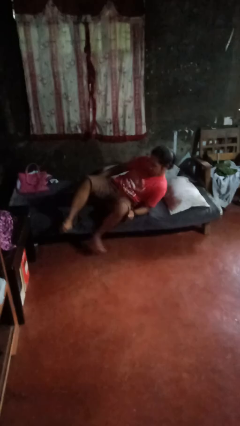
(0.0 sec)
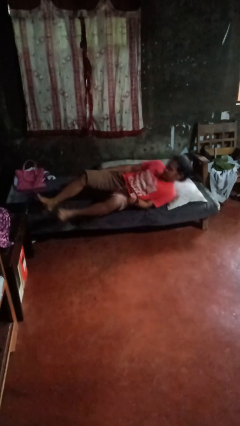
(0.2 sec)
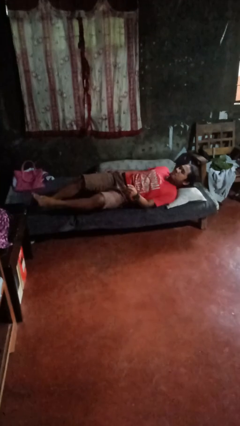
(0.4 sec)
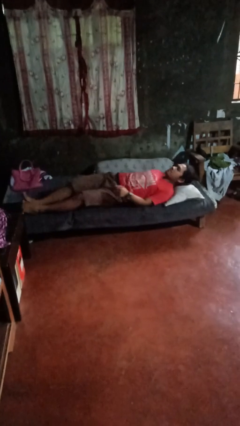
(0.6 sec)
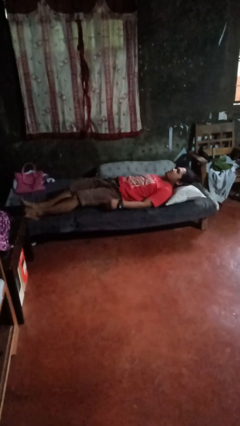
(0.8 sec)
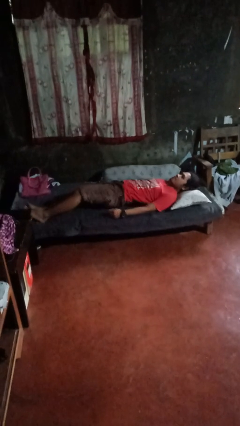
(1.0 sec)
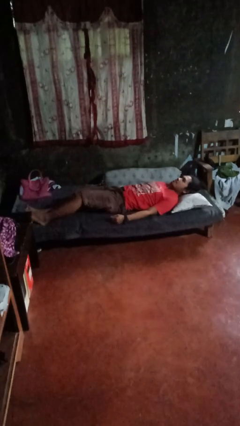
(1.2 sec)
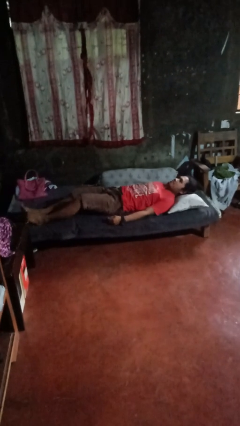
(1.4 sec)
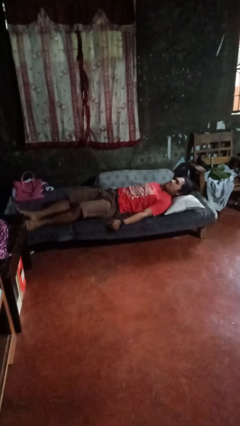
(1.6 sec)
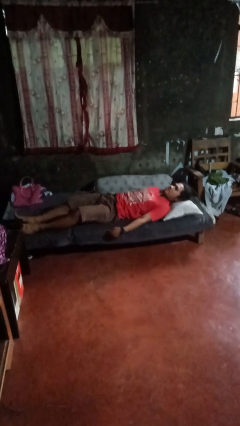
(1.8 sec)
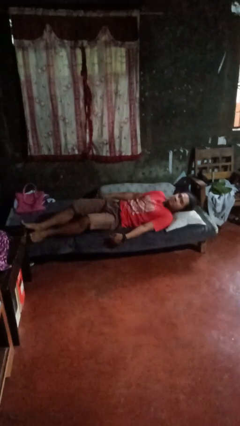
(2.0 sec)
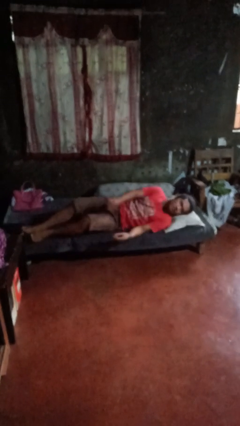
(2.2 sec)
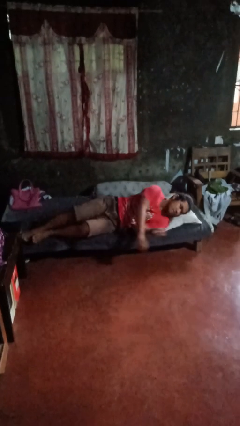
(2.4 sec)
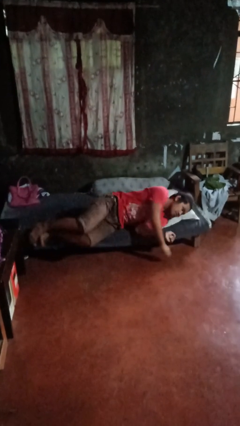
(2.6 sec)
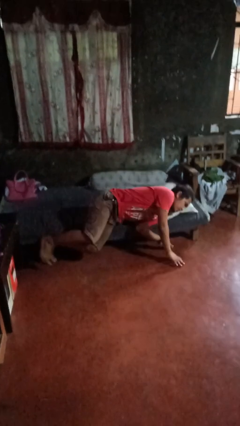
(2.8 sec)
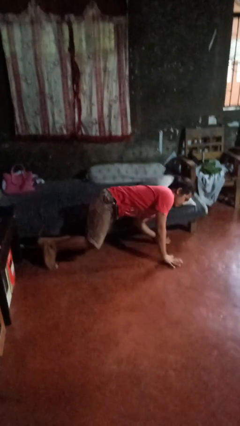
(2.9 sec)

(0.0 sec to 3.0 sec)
person lies down on bed

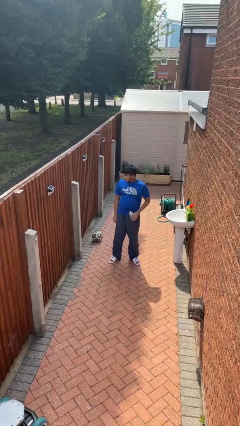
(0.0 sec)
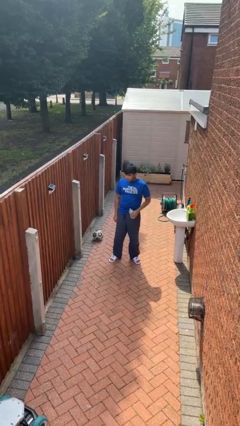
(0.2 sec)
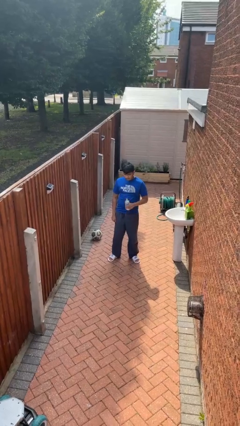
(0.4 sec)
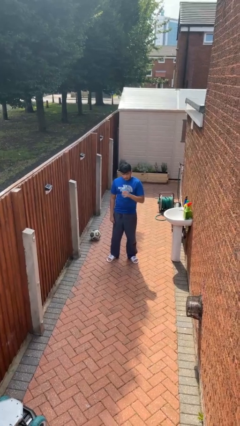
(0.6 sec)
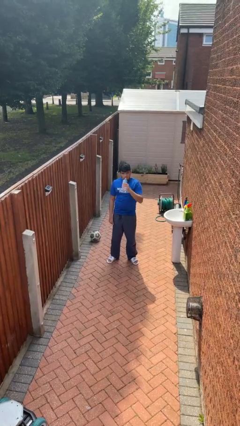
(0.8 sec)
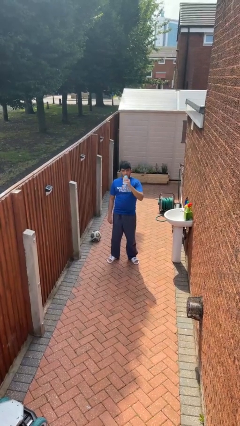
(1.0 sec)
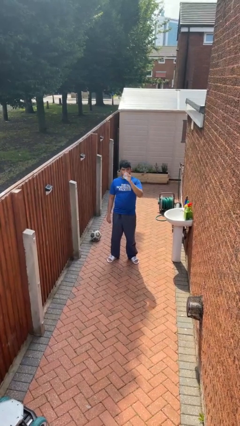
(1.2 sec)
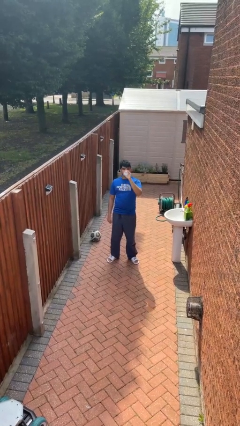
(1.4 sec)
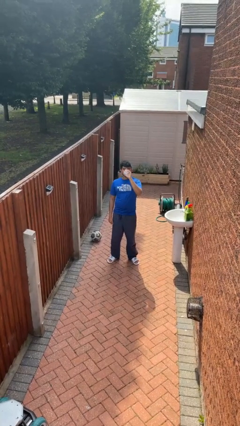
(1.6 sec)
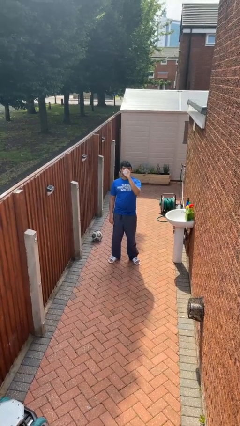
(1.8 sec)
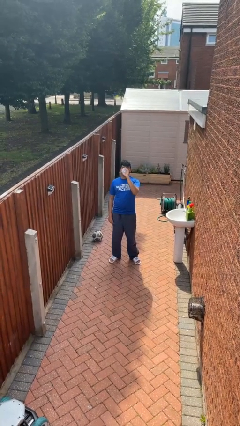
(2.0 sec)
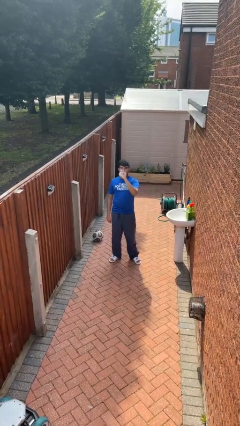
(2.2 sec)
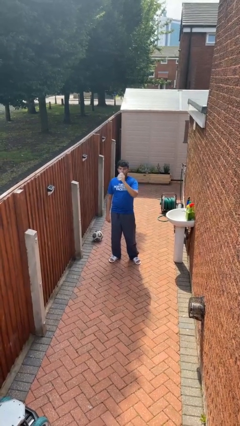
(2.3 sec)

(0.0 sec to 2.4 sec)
person drinks from bottle

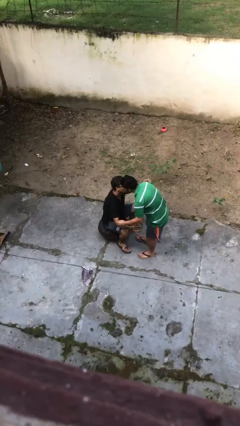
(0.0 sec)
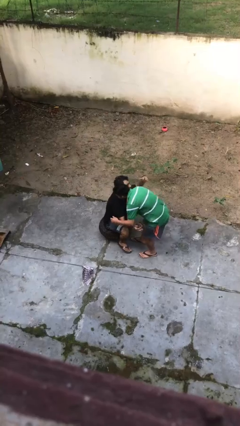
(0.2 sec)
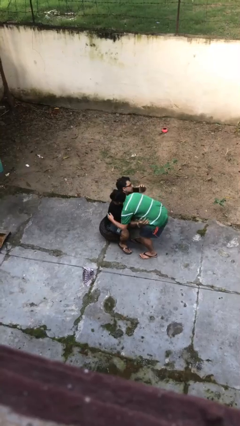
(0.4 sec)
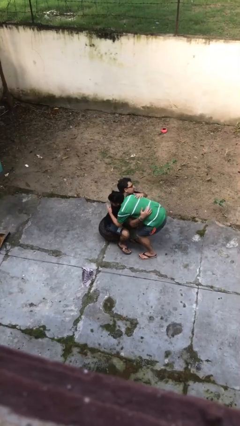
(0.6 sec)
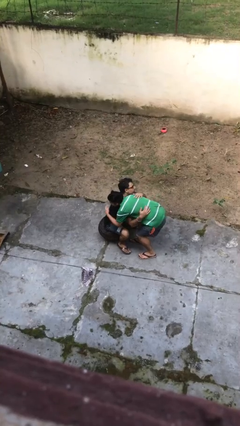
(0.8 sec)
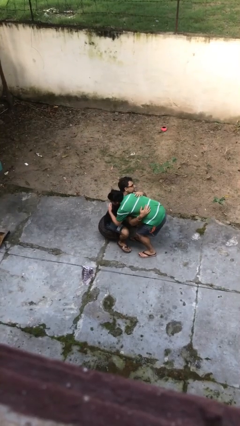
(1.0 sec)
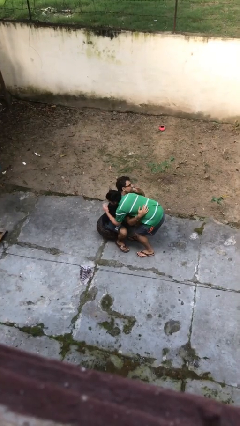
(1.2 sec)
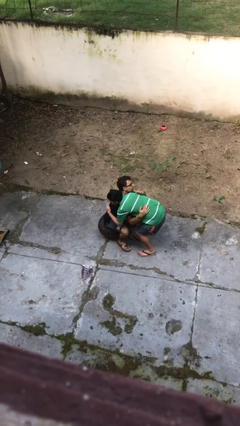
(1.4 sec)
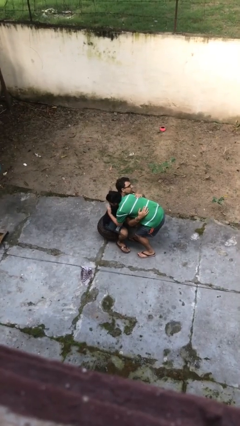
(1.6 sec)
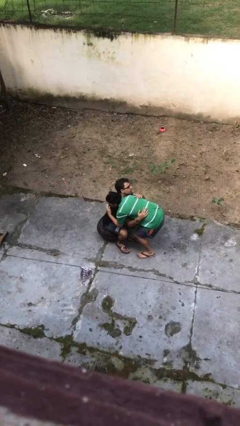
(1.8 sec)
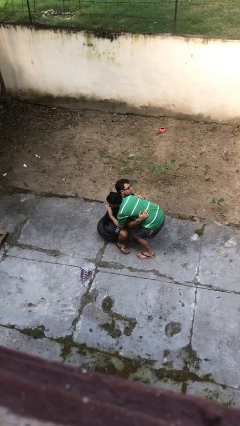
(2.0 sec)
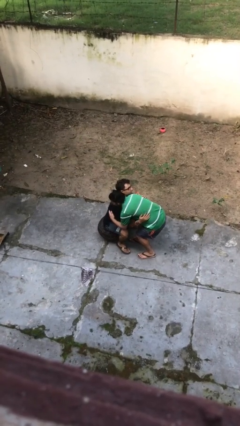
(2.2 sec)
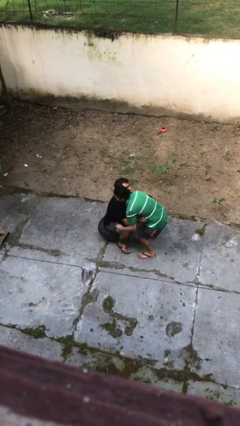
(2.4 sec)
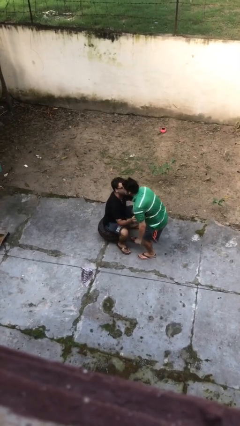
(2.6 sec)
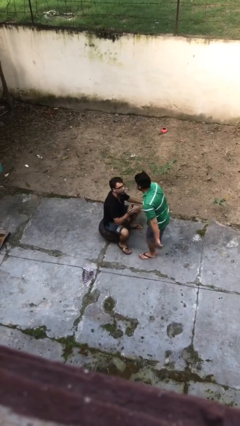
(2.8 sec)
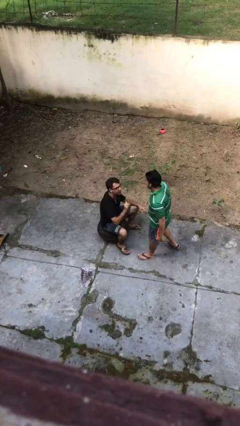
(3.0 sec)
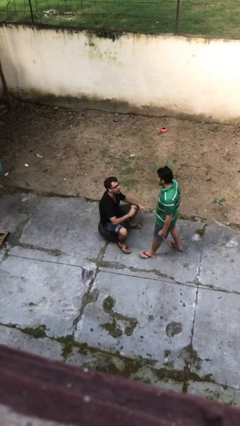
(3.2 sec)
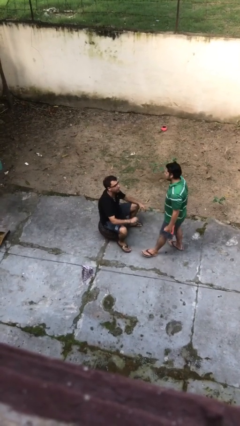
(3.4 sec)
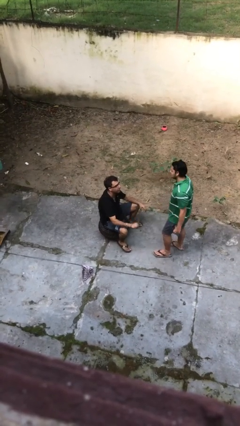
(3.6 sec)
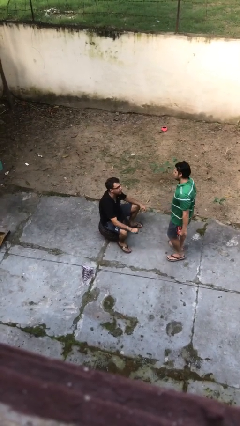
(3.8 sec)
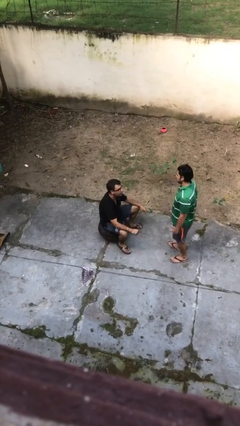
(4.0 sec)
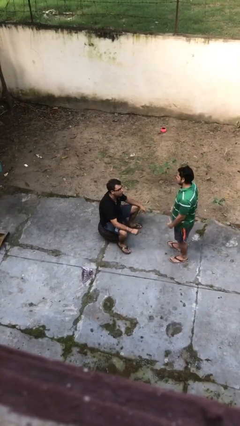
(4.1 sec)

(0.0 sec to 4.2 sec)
person embraces person

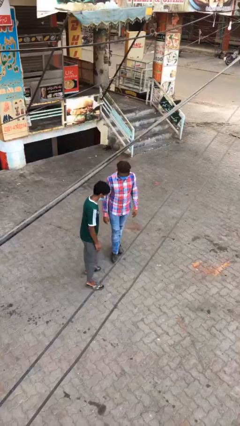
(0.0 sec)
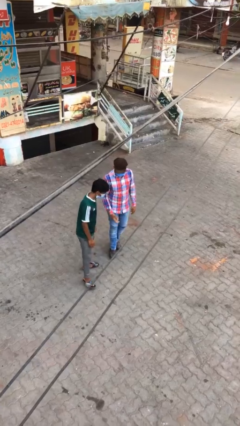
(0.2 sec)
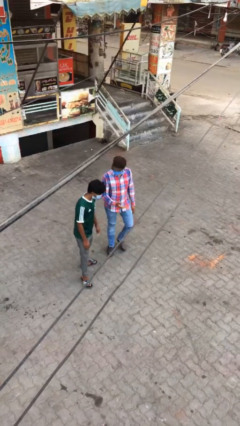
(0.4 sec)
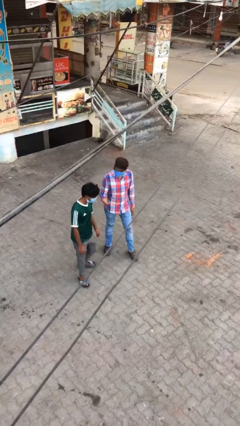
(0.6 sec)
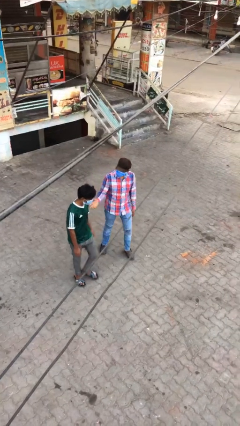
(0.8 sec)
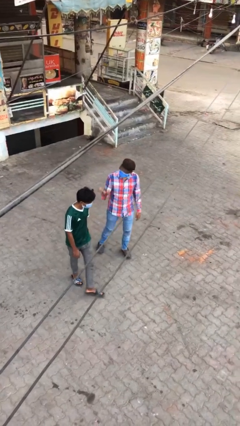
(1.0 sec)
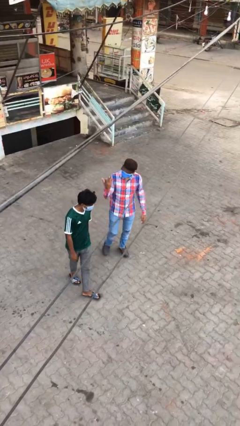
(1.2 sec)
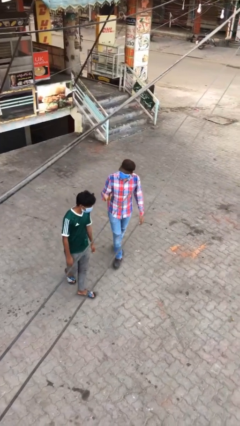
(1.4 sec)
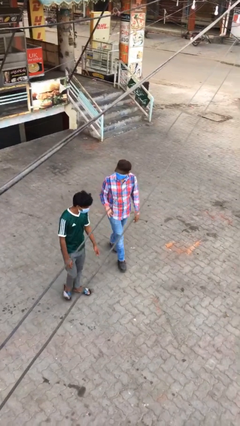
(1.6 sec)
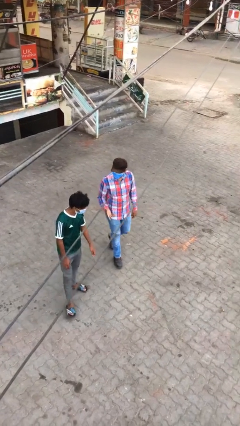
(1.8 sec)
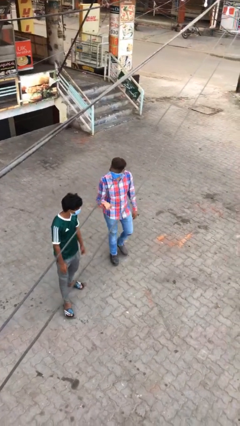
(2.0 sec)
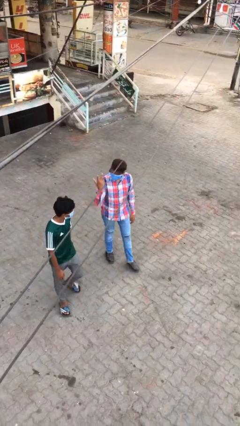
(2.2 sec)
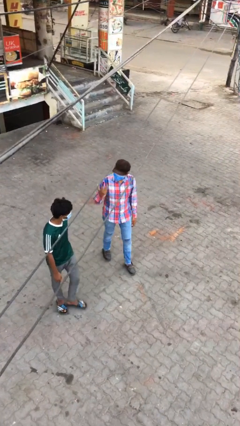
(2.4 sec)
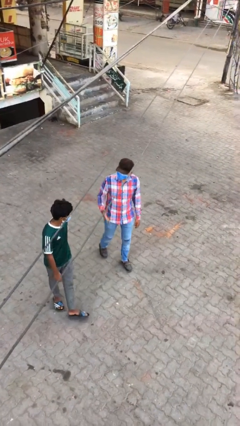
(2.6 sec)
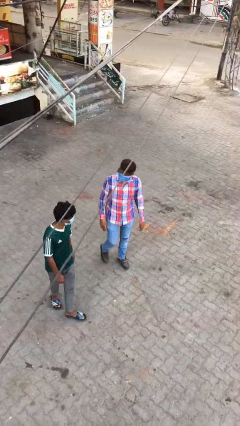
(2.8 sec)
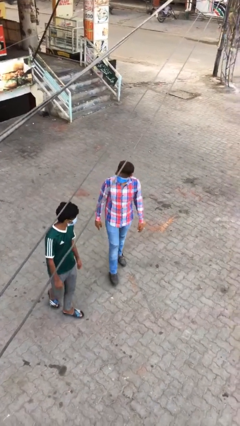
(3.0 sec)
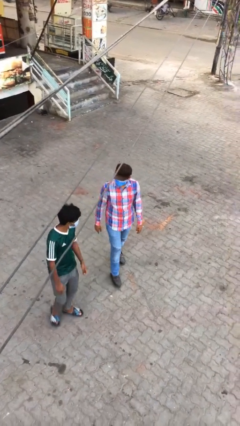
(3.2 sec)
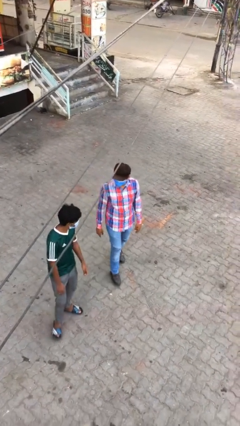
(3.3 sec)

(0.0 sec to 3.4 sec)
person talks to person

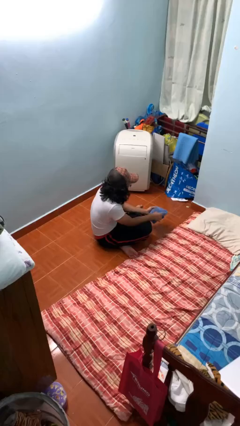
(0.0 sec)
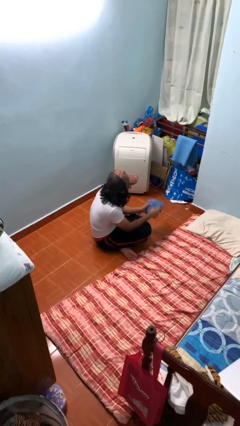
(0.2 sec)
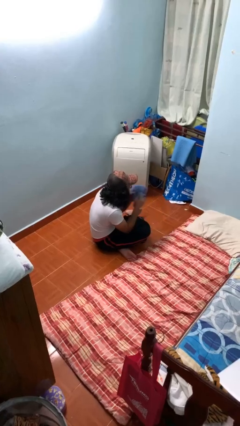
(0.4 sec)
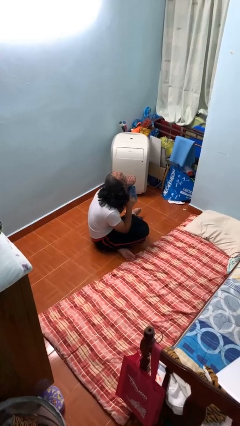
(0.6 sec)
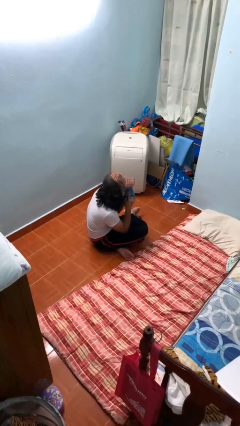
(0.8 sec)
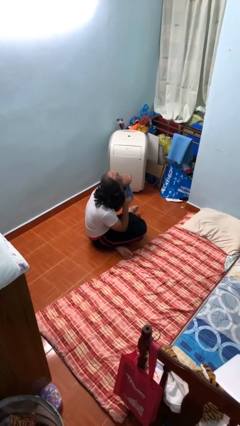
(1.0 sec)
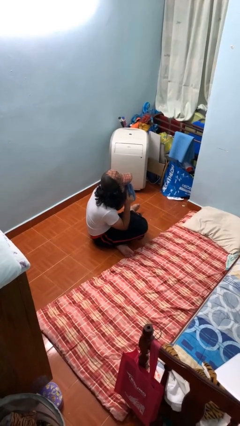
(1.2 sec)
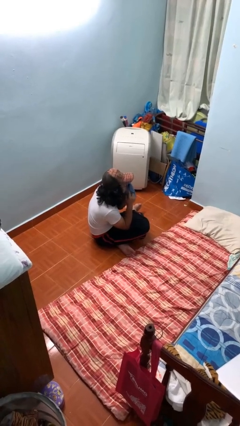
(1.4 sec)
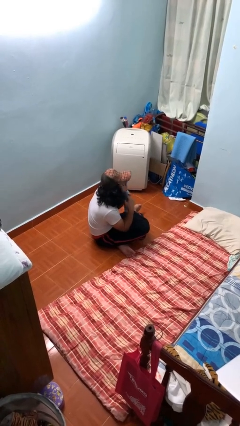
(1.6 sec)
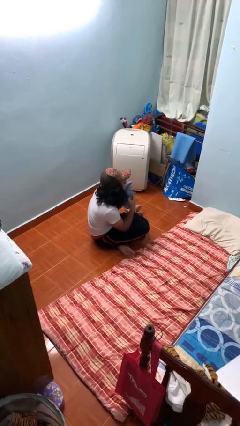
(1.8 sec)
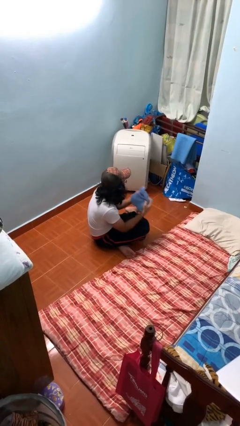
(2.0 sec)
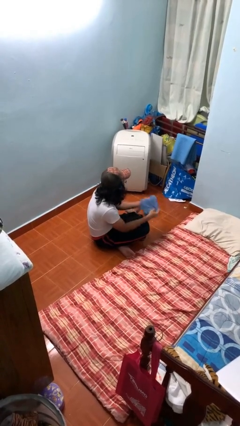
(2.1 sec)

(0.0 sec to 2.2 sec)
person wipes mouth with napkin

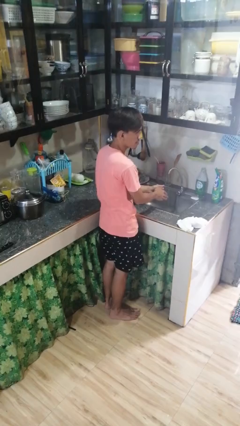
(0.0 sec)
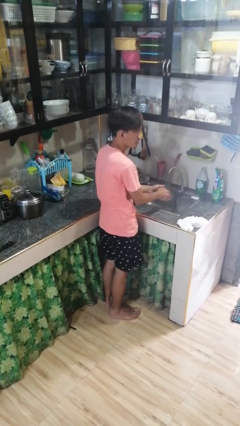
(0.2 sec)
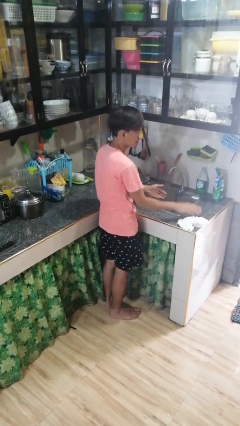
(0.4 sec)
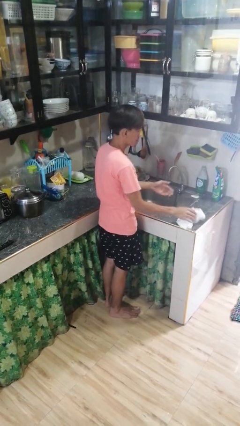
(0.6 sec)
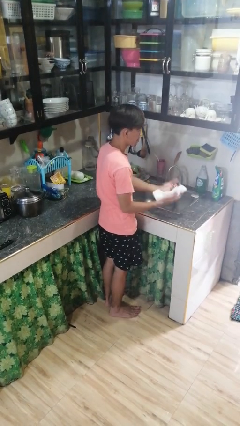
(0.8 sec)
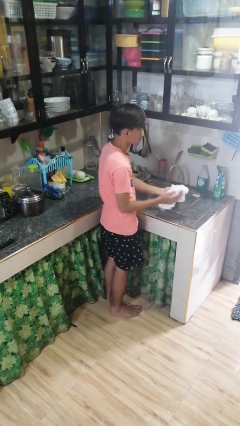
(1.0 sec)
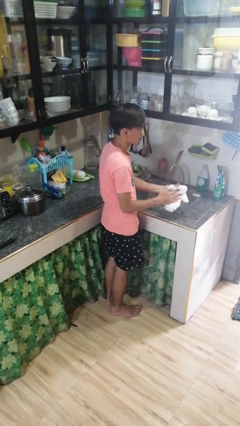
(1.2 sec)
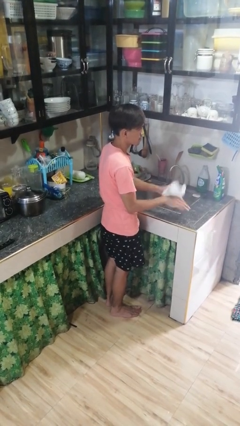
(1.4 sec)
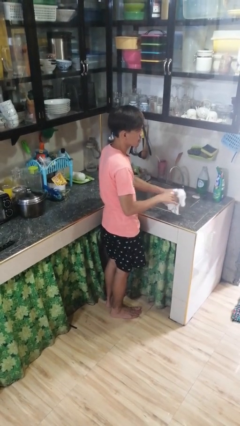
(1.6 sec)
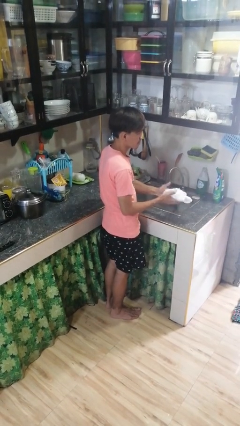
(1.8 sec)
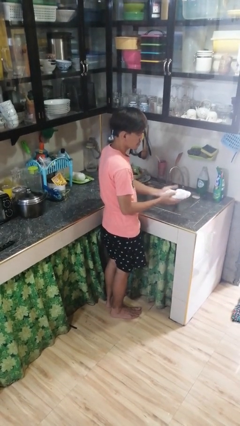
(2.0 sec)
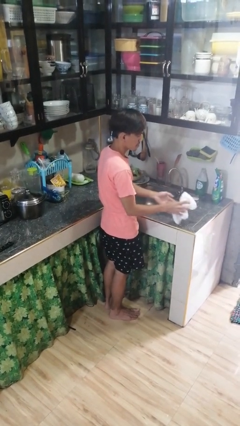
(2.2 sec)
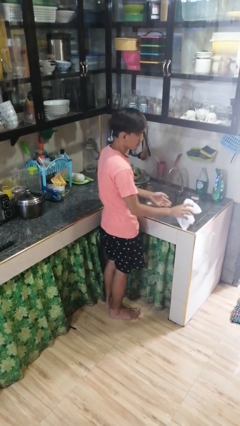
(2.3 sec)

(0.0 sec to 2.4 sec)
person dries hands with towel
